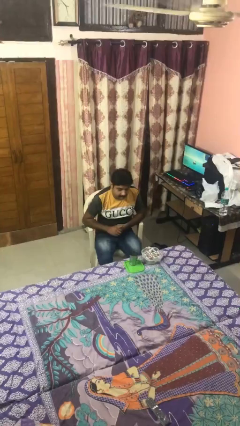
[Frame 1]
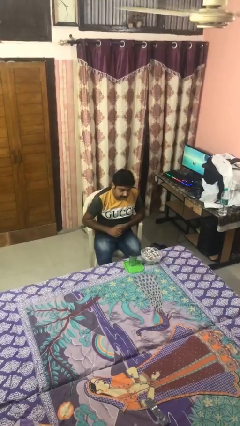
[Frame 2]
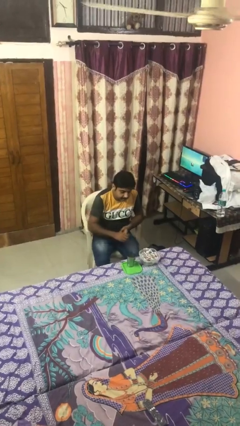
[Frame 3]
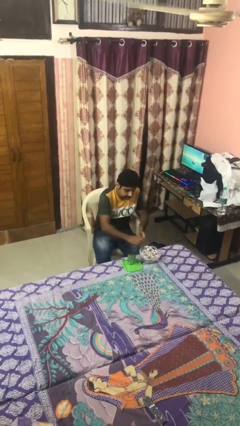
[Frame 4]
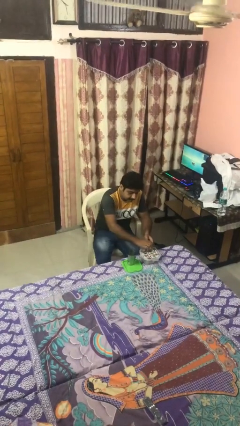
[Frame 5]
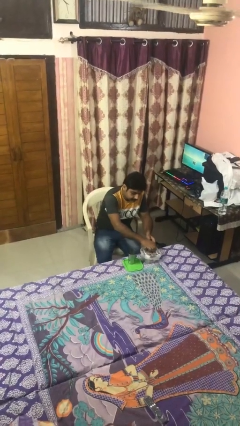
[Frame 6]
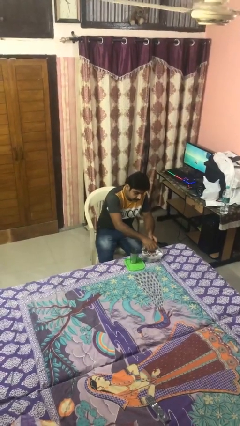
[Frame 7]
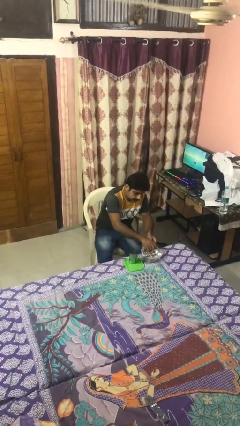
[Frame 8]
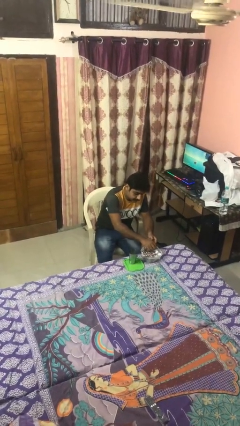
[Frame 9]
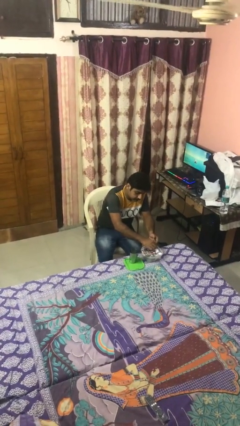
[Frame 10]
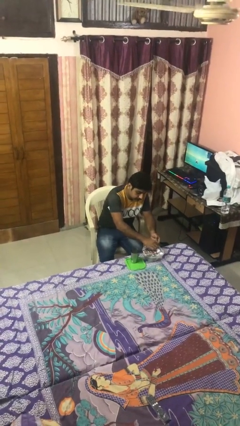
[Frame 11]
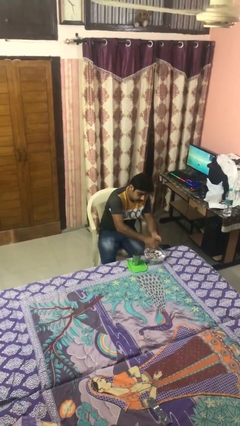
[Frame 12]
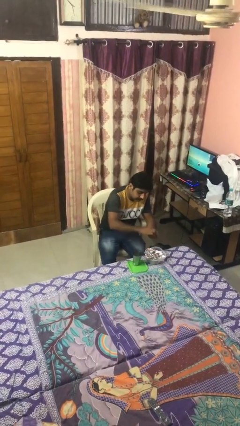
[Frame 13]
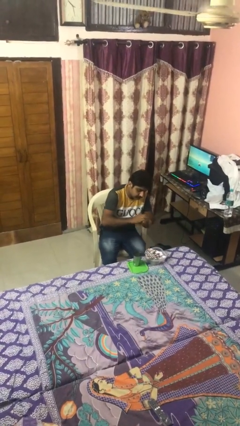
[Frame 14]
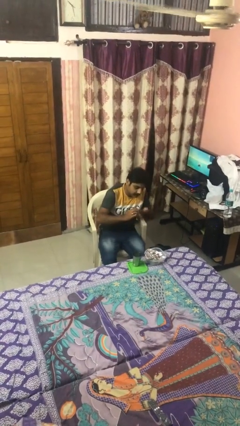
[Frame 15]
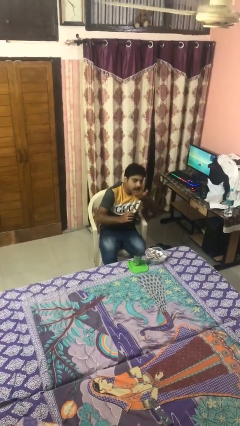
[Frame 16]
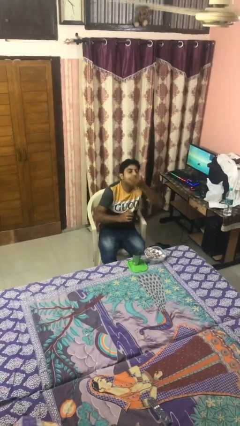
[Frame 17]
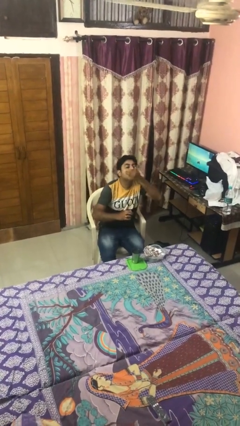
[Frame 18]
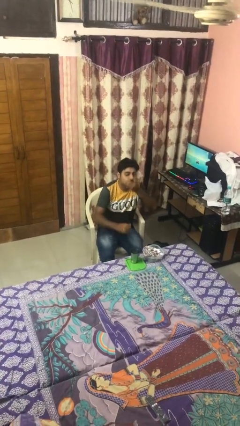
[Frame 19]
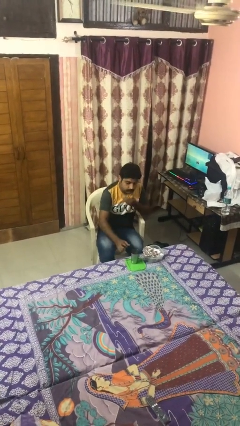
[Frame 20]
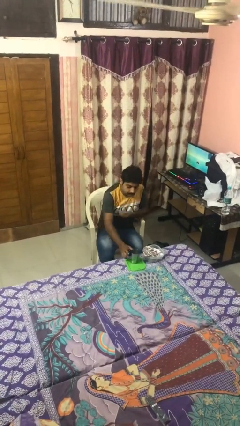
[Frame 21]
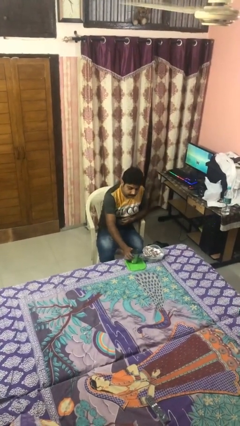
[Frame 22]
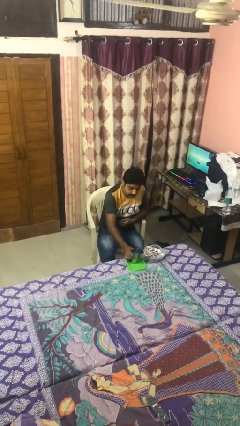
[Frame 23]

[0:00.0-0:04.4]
person takes medicine pills

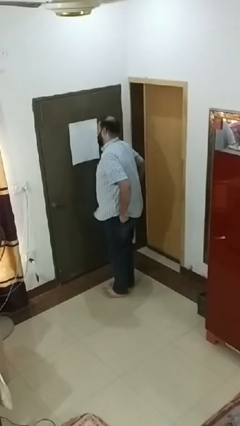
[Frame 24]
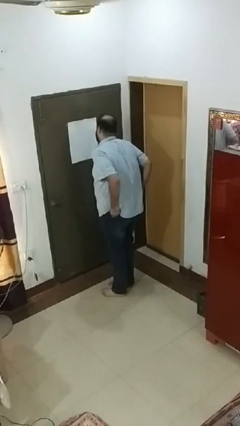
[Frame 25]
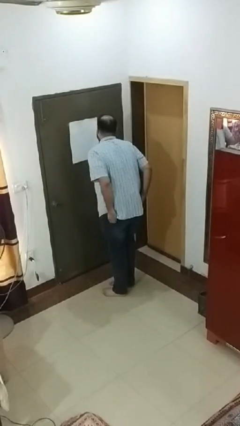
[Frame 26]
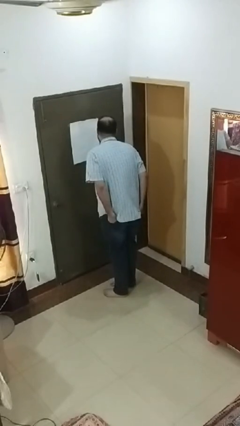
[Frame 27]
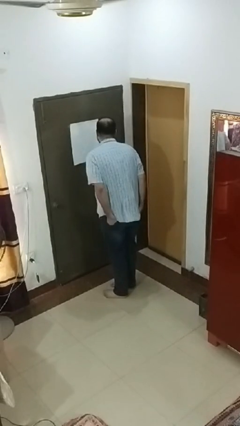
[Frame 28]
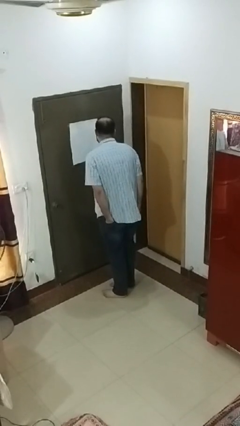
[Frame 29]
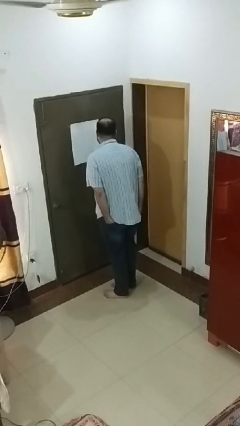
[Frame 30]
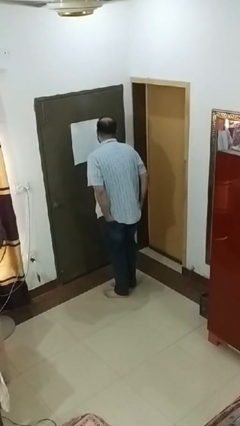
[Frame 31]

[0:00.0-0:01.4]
person puts hands in back pockets

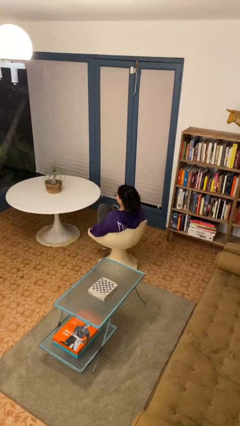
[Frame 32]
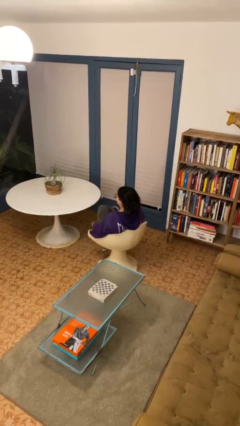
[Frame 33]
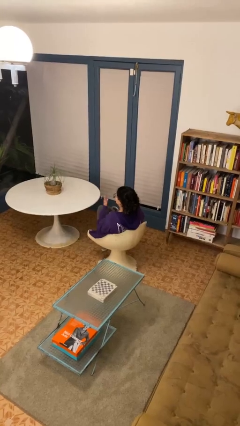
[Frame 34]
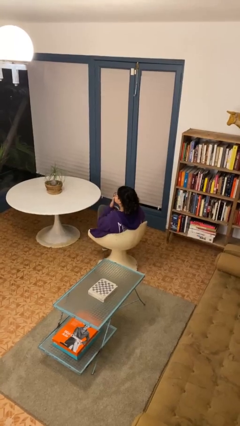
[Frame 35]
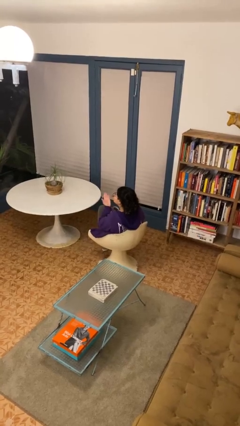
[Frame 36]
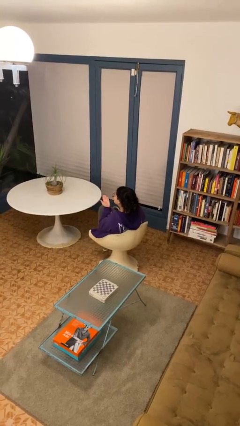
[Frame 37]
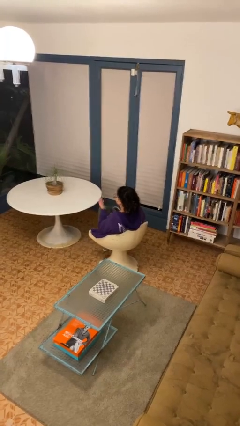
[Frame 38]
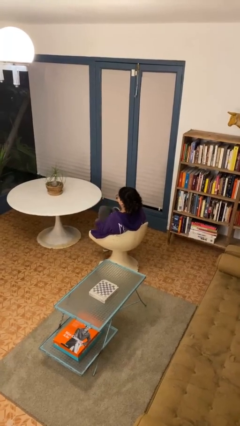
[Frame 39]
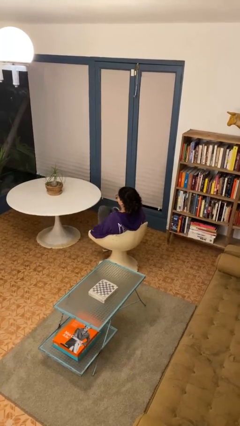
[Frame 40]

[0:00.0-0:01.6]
person gestures blow kiss

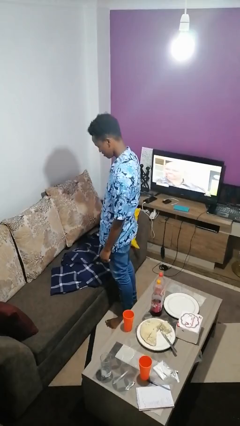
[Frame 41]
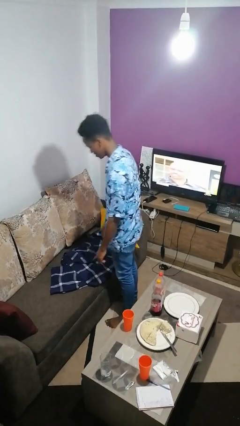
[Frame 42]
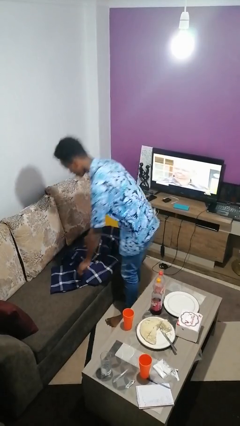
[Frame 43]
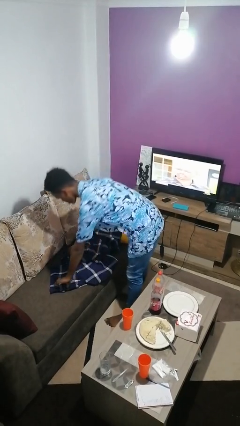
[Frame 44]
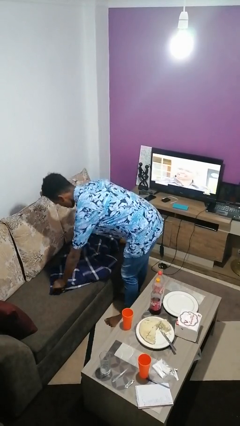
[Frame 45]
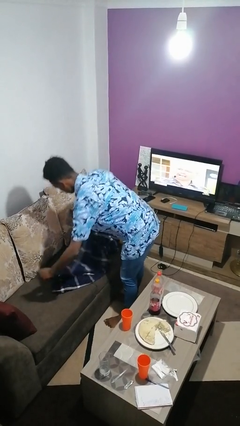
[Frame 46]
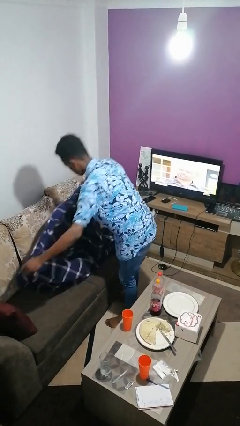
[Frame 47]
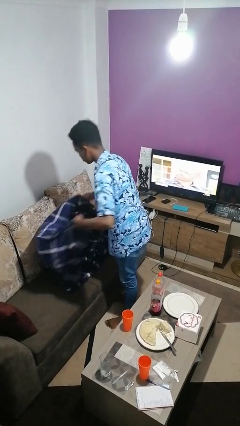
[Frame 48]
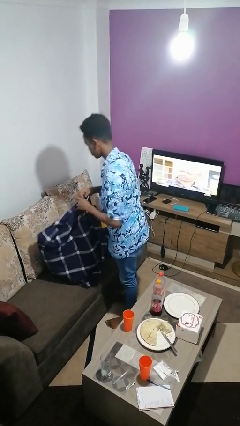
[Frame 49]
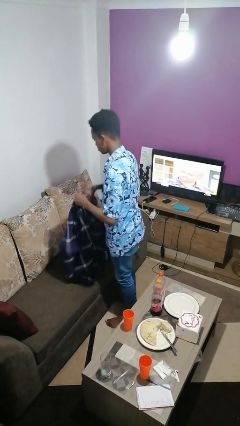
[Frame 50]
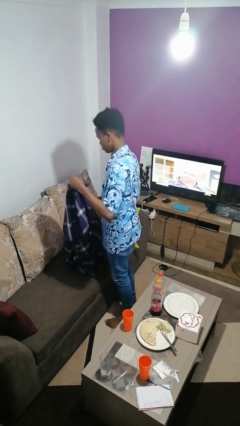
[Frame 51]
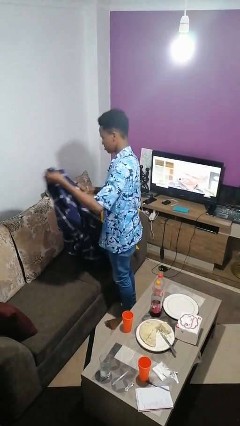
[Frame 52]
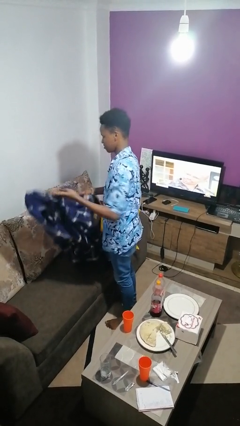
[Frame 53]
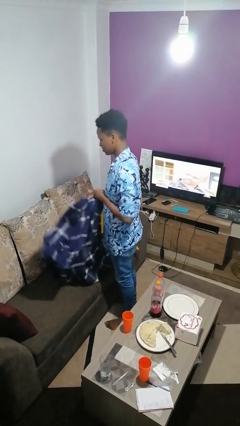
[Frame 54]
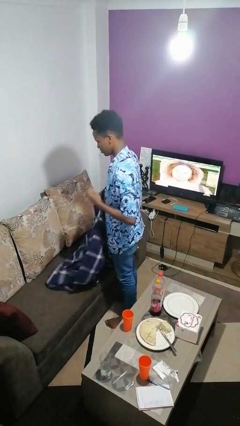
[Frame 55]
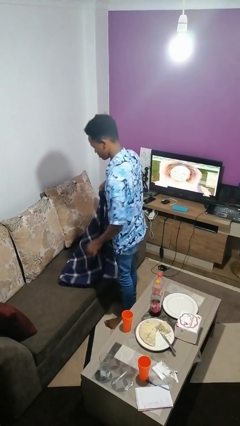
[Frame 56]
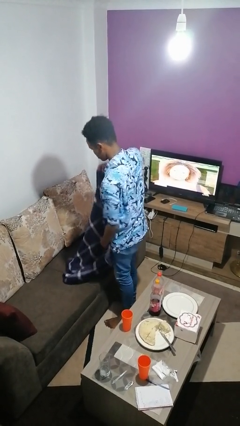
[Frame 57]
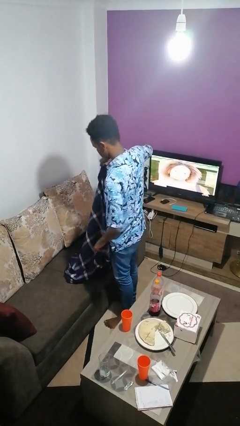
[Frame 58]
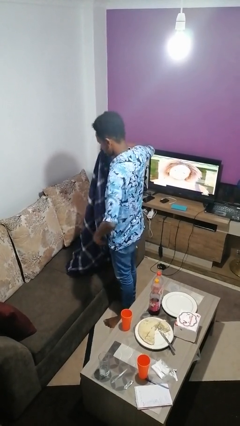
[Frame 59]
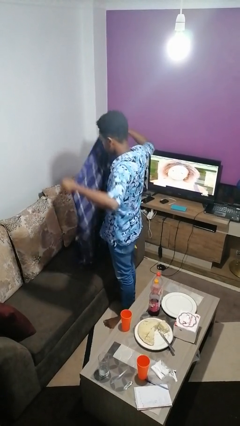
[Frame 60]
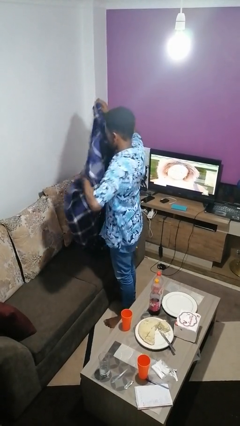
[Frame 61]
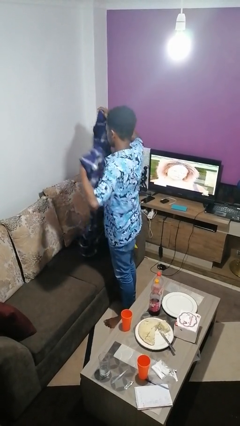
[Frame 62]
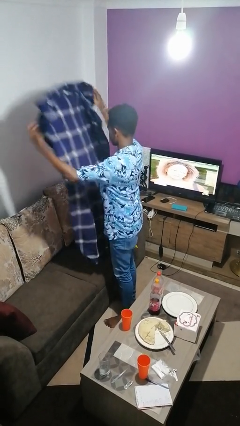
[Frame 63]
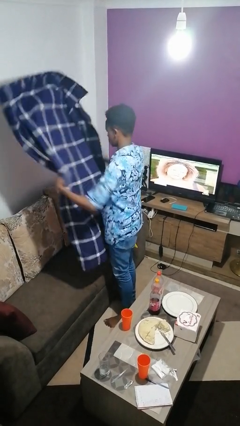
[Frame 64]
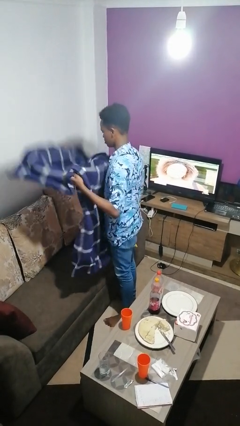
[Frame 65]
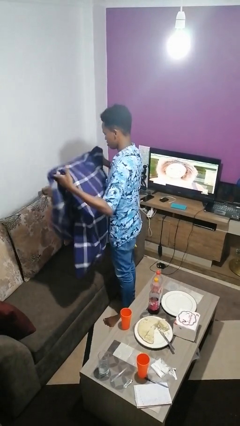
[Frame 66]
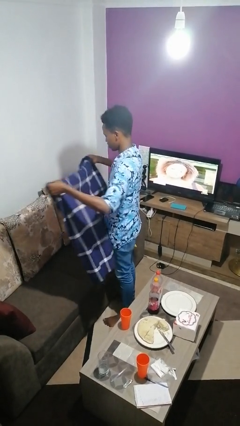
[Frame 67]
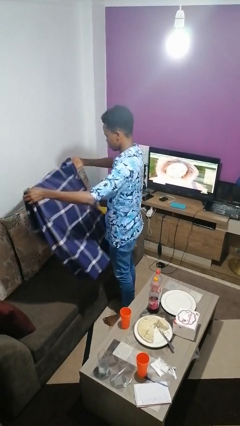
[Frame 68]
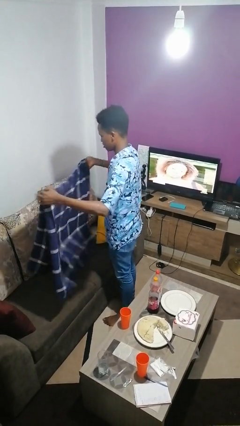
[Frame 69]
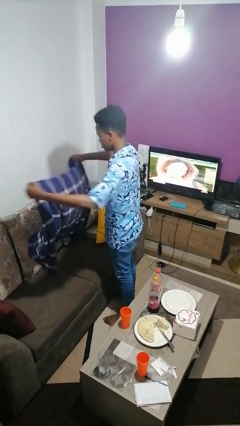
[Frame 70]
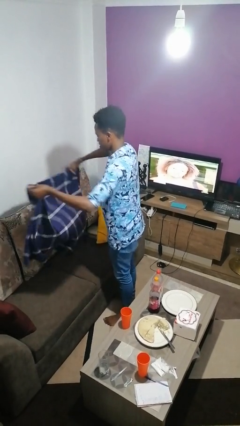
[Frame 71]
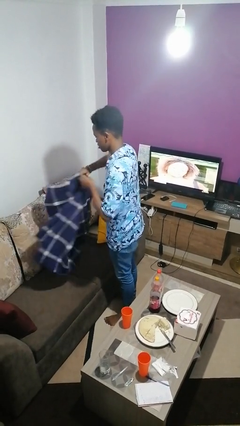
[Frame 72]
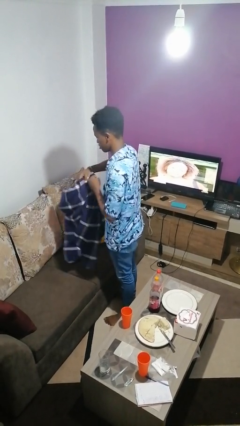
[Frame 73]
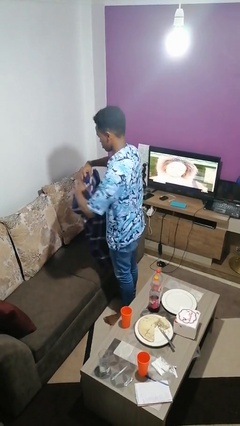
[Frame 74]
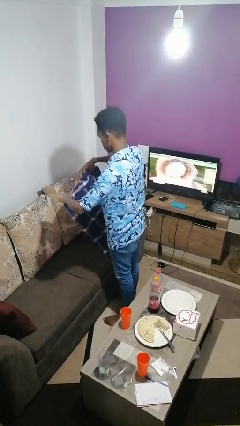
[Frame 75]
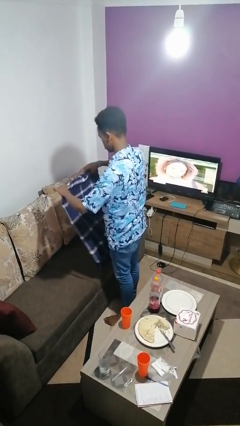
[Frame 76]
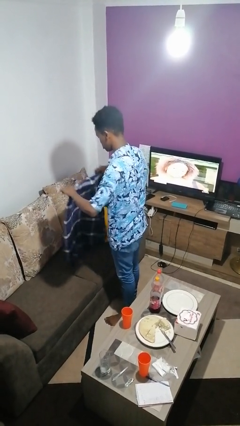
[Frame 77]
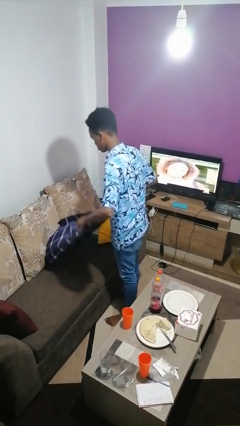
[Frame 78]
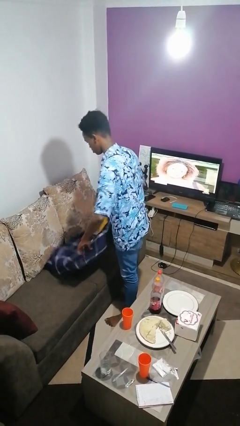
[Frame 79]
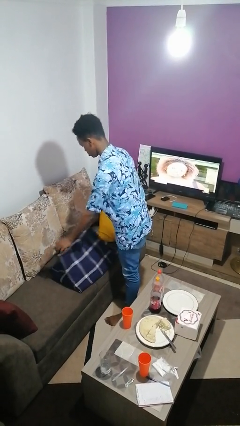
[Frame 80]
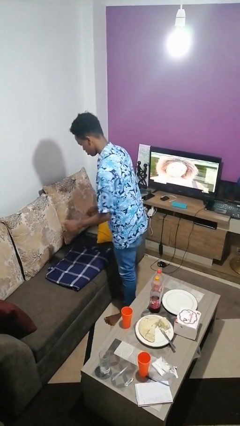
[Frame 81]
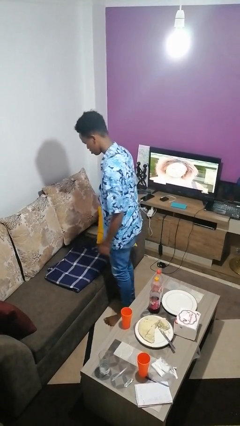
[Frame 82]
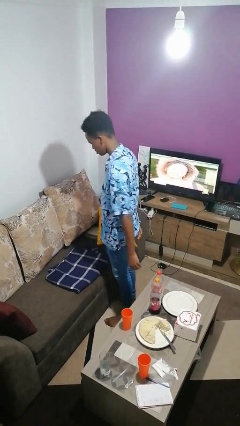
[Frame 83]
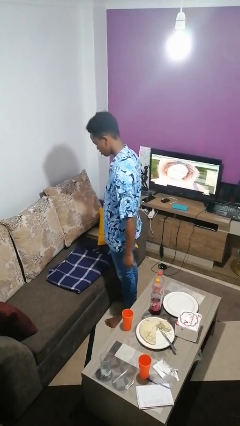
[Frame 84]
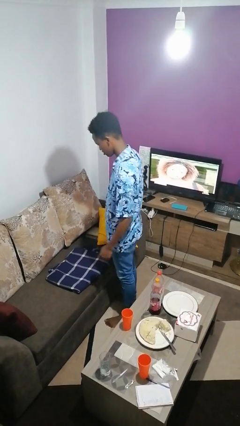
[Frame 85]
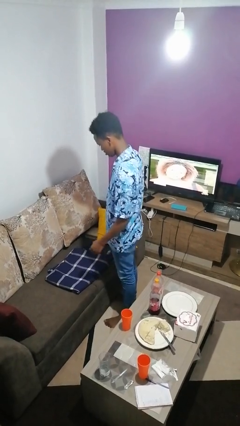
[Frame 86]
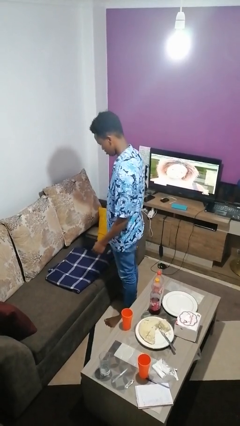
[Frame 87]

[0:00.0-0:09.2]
person folds blanket

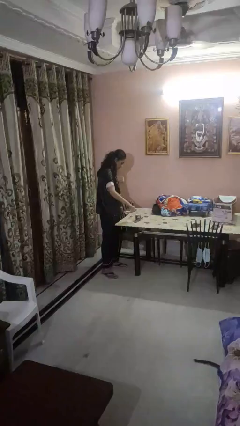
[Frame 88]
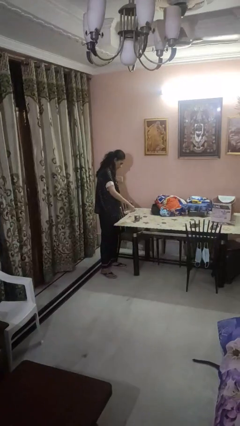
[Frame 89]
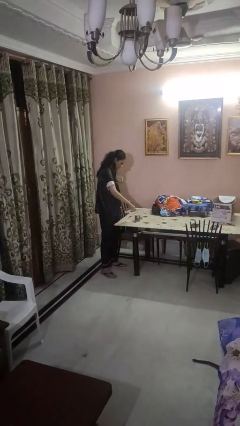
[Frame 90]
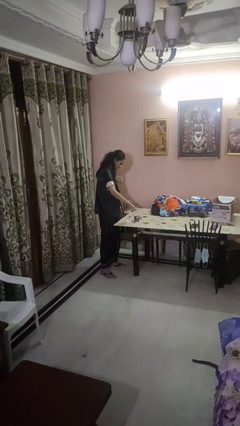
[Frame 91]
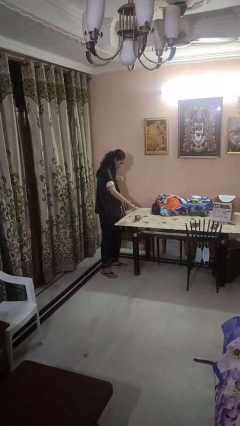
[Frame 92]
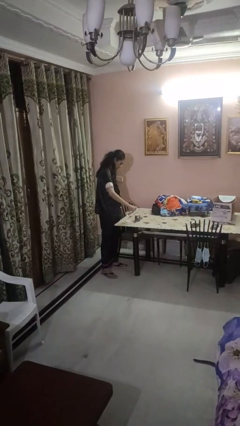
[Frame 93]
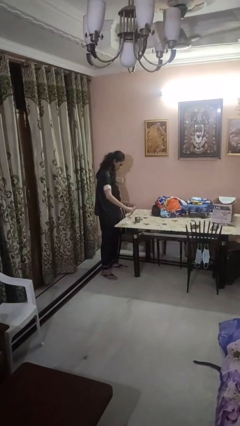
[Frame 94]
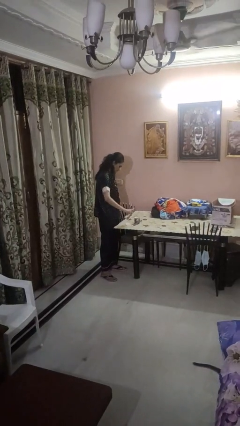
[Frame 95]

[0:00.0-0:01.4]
person pours liquid into cup
